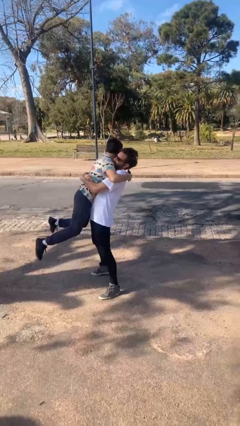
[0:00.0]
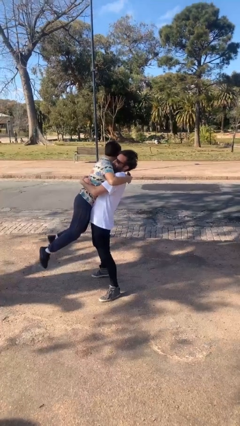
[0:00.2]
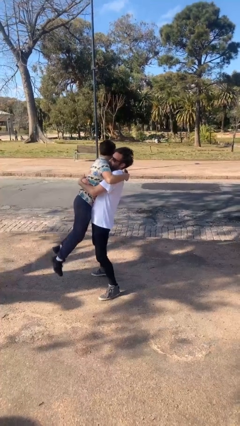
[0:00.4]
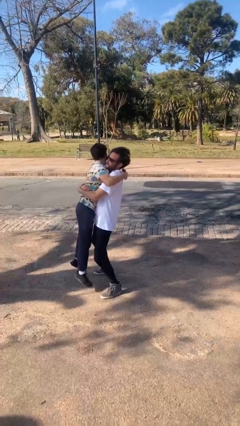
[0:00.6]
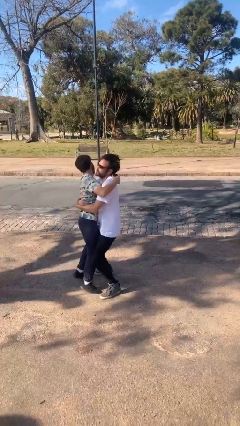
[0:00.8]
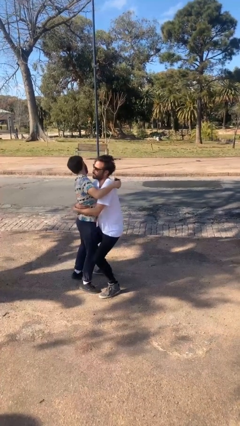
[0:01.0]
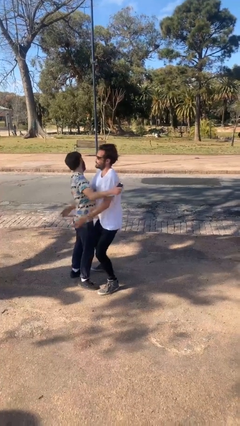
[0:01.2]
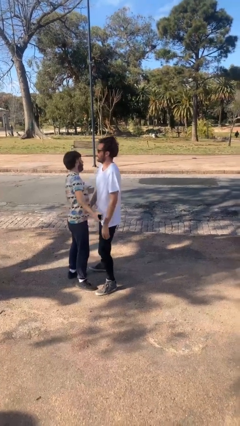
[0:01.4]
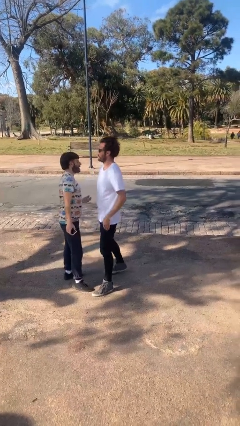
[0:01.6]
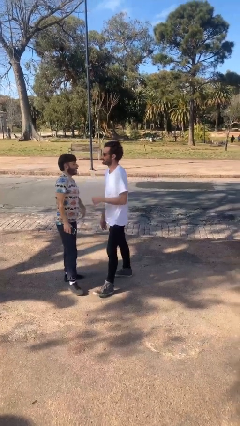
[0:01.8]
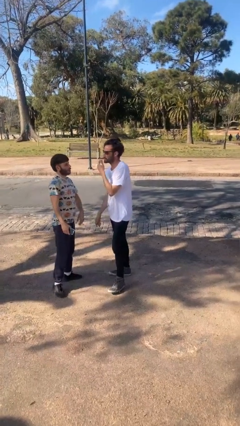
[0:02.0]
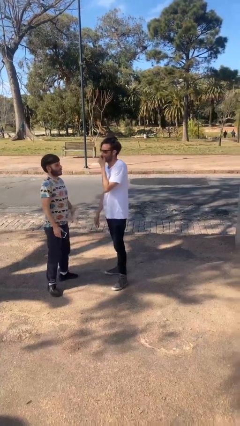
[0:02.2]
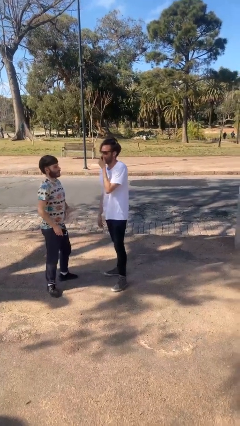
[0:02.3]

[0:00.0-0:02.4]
person puts down person

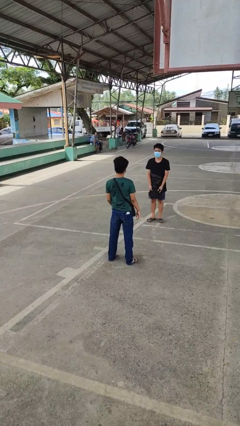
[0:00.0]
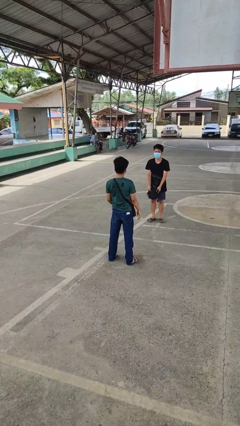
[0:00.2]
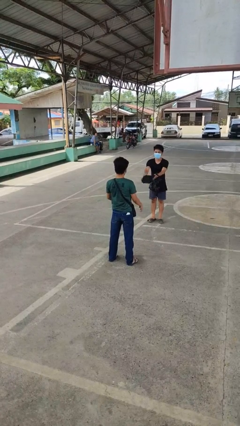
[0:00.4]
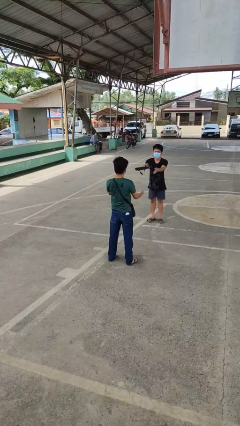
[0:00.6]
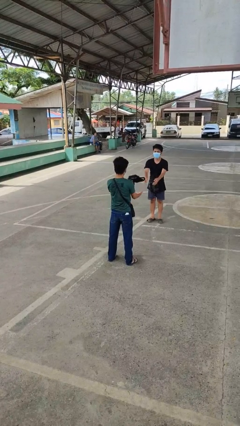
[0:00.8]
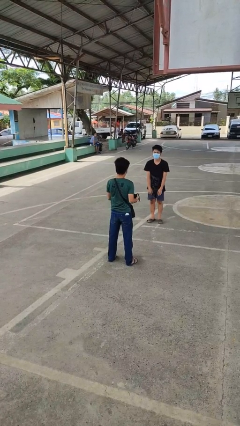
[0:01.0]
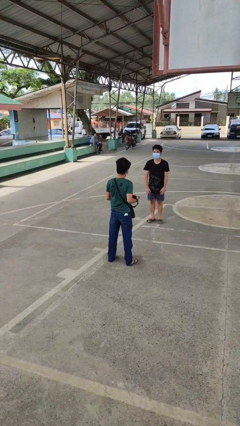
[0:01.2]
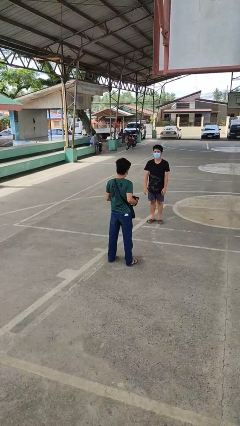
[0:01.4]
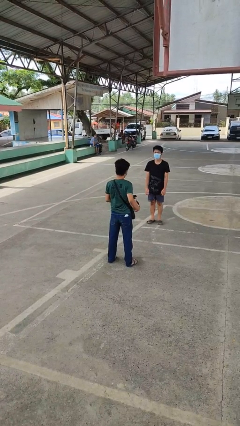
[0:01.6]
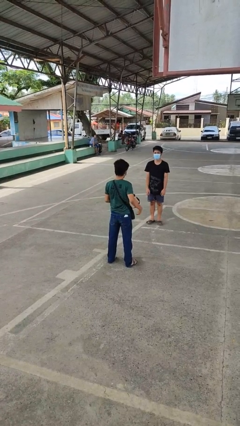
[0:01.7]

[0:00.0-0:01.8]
person catches object from person

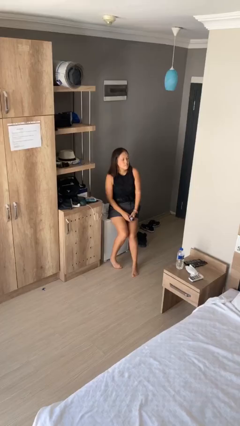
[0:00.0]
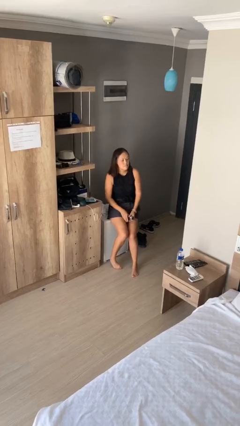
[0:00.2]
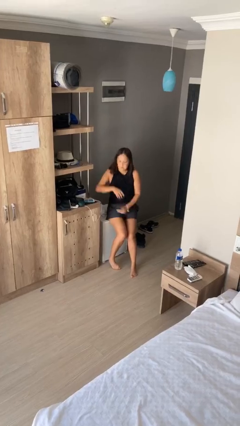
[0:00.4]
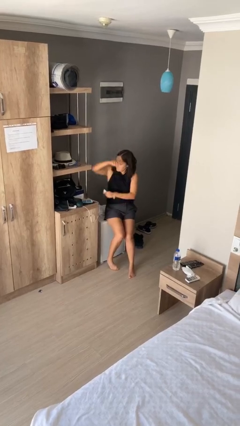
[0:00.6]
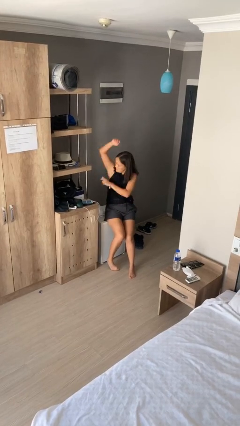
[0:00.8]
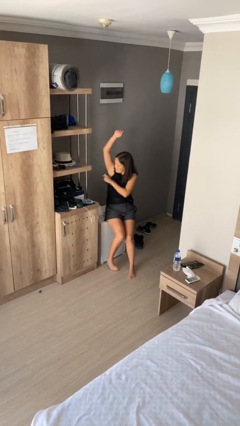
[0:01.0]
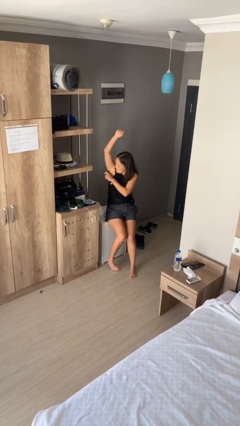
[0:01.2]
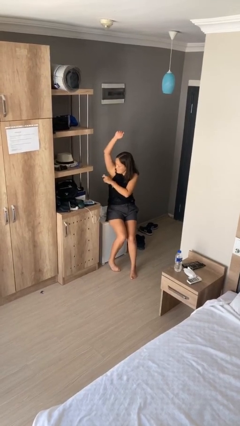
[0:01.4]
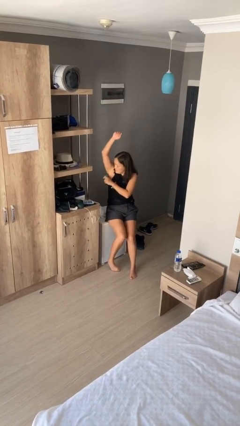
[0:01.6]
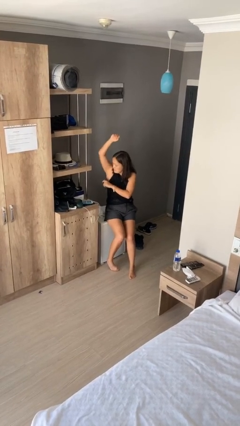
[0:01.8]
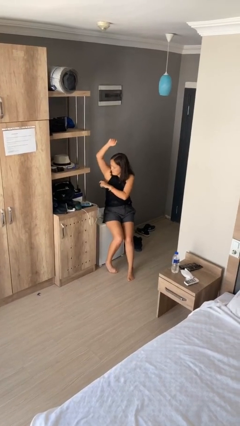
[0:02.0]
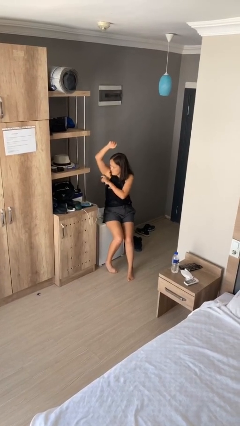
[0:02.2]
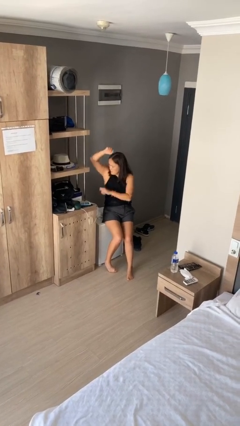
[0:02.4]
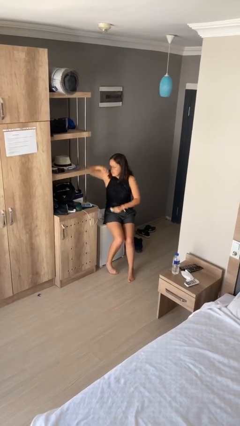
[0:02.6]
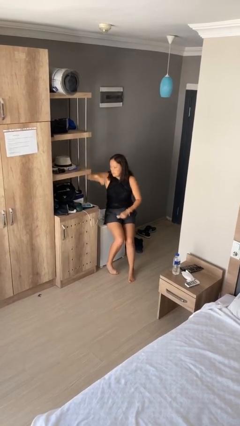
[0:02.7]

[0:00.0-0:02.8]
person applies deodorant

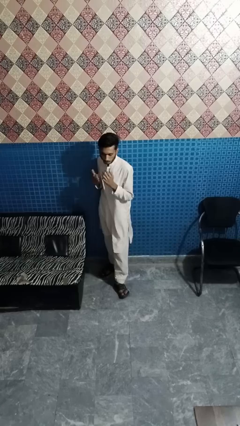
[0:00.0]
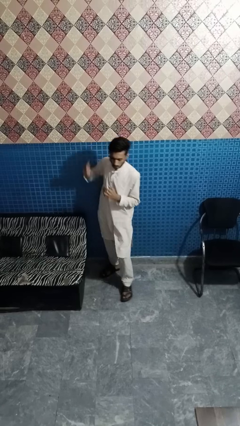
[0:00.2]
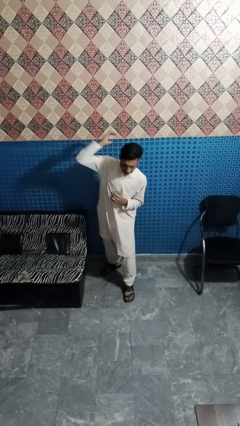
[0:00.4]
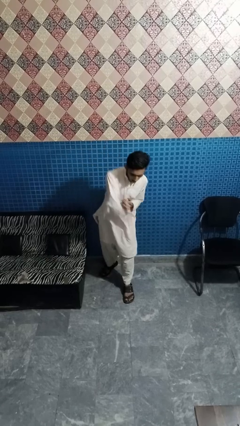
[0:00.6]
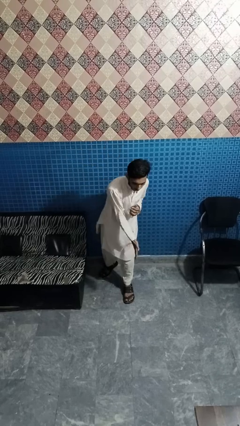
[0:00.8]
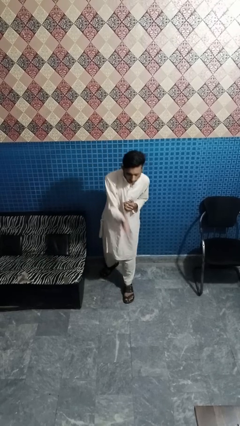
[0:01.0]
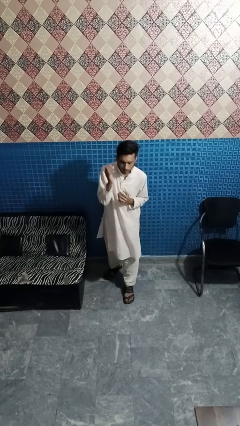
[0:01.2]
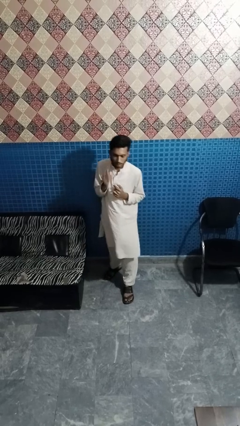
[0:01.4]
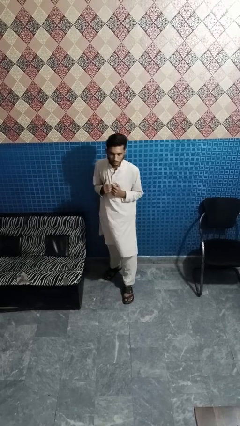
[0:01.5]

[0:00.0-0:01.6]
person karate chop

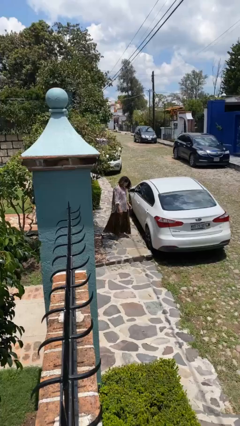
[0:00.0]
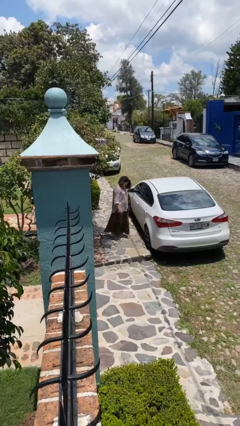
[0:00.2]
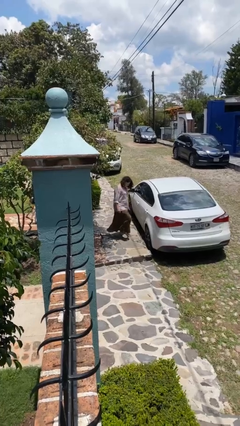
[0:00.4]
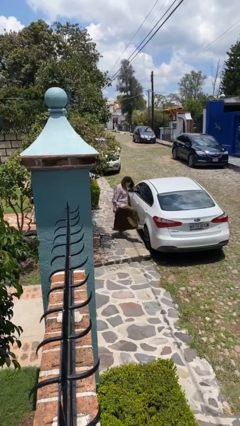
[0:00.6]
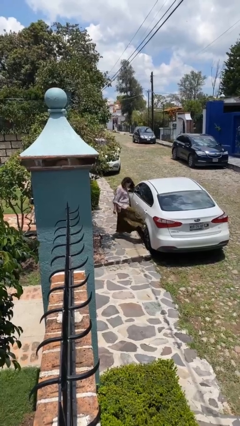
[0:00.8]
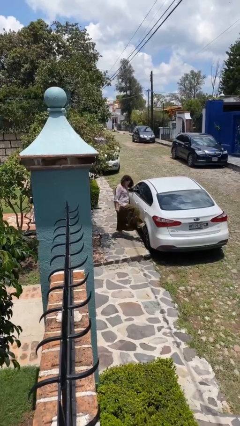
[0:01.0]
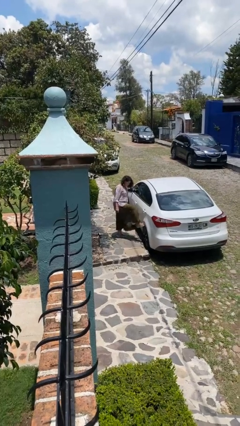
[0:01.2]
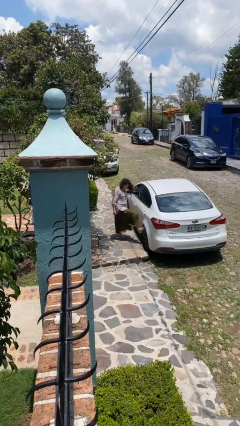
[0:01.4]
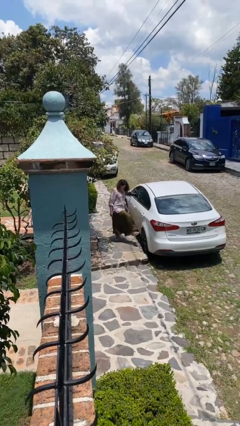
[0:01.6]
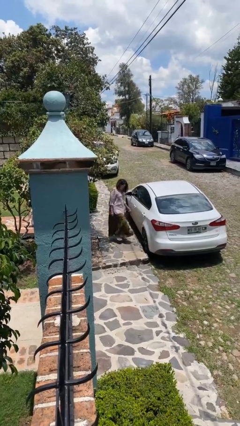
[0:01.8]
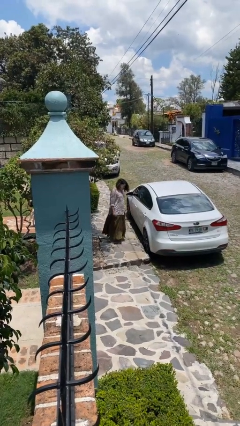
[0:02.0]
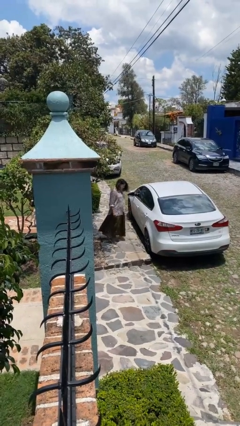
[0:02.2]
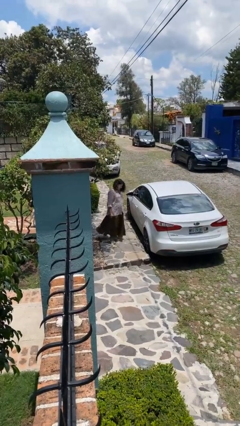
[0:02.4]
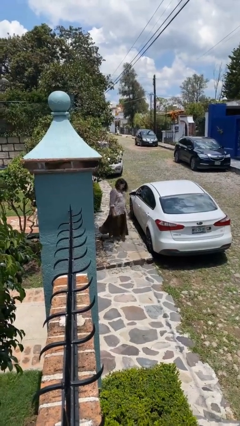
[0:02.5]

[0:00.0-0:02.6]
person kicks car tires

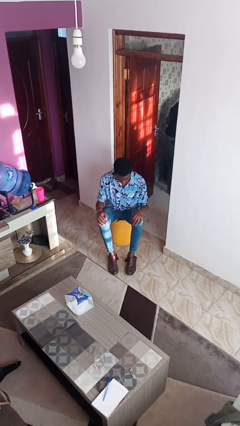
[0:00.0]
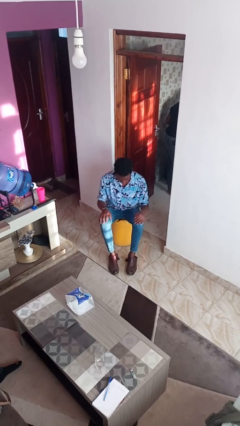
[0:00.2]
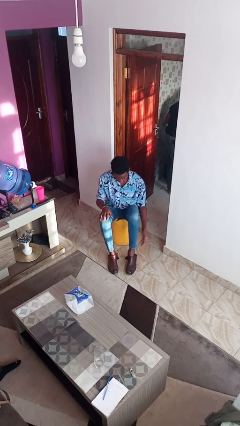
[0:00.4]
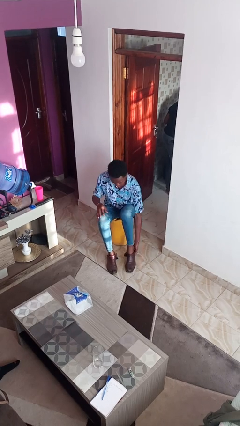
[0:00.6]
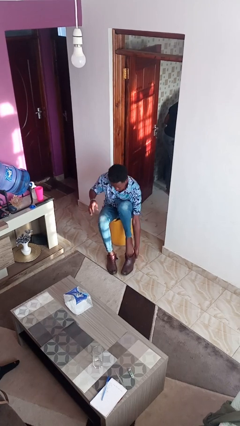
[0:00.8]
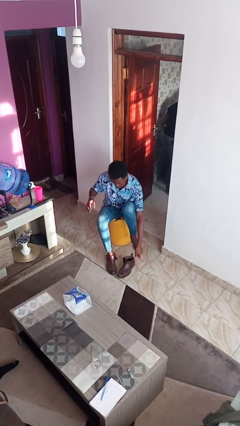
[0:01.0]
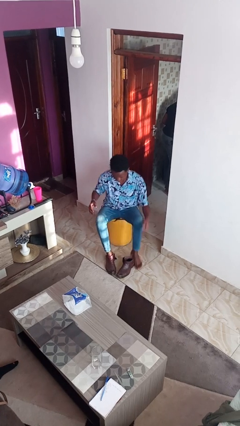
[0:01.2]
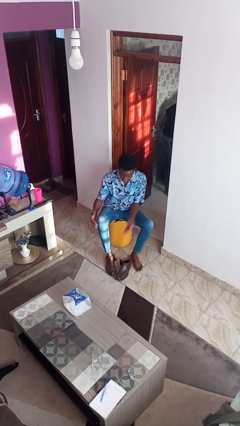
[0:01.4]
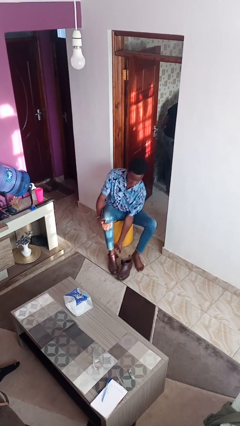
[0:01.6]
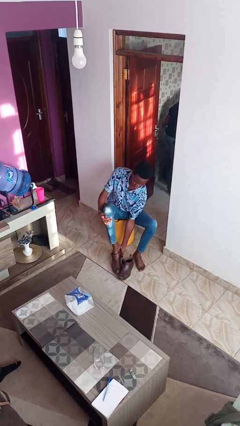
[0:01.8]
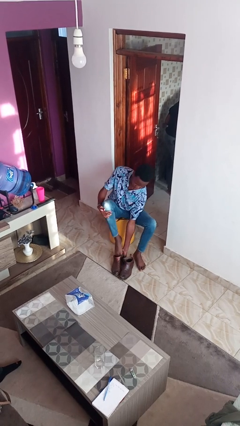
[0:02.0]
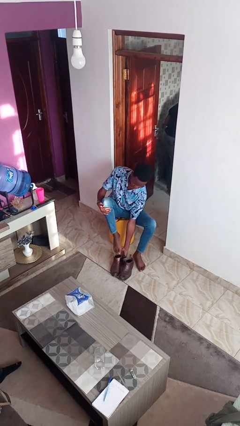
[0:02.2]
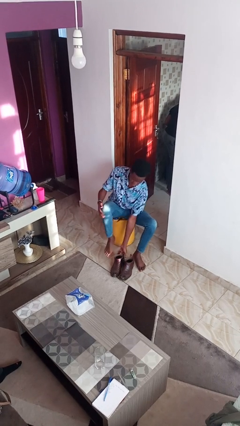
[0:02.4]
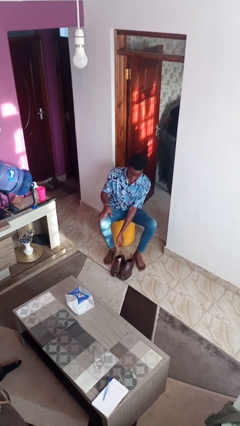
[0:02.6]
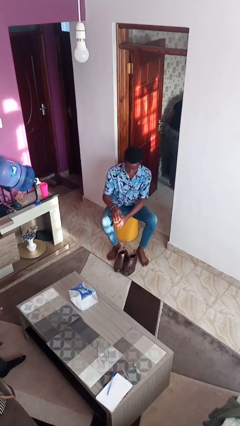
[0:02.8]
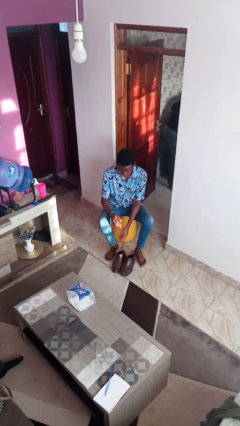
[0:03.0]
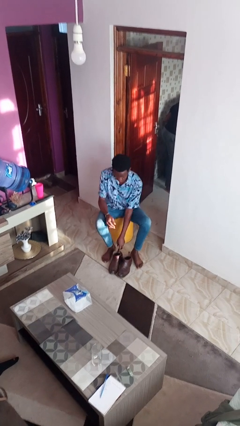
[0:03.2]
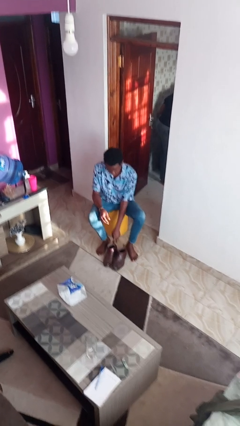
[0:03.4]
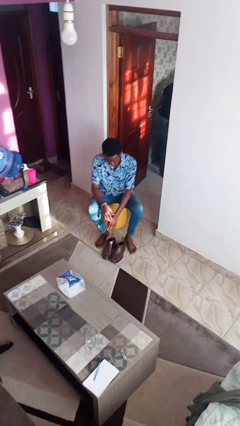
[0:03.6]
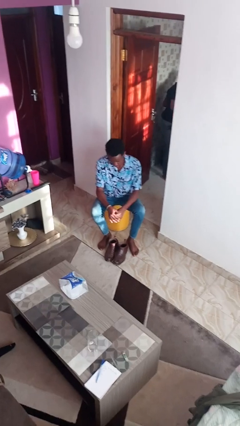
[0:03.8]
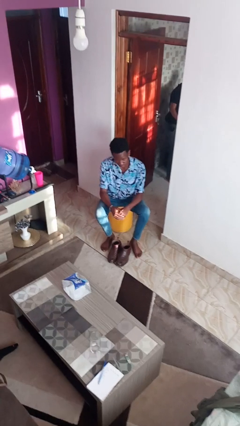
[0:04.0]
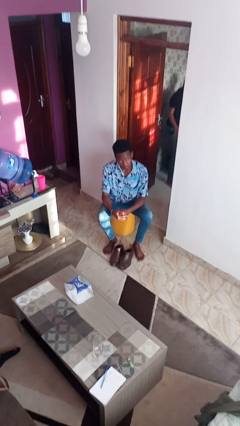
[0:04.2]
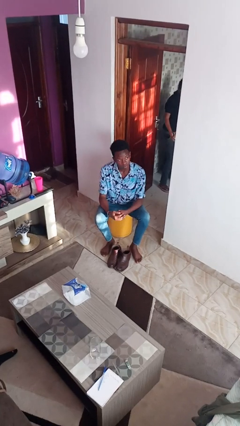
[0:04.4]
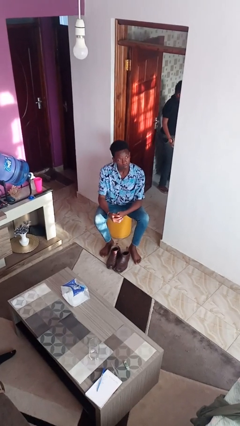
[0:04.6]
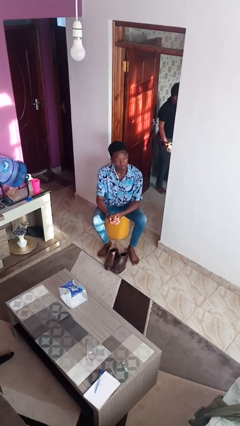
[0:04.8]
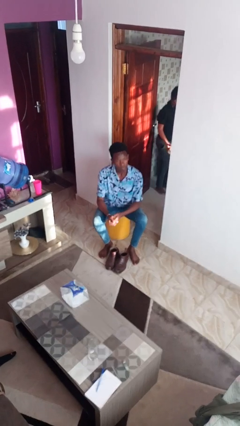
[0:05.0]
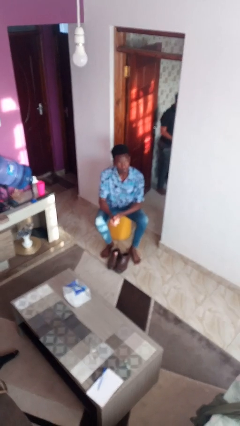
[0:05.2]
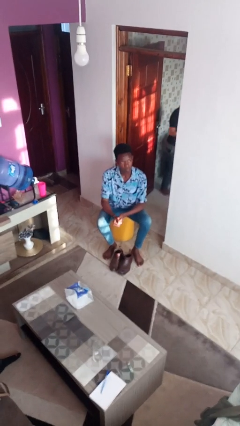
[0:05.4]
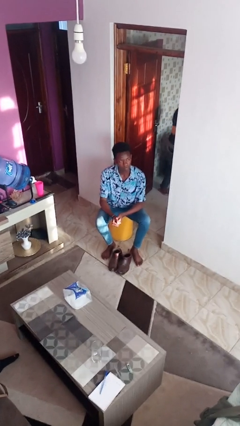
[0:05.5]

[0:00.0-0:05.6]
person takes off boots
